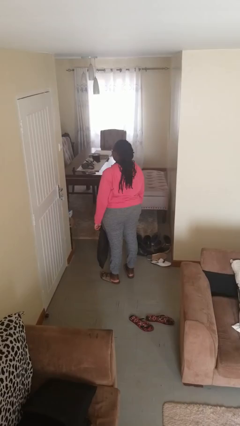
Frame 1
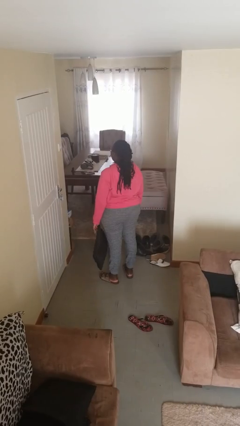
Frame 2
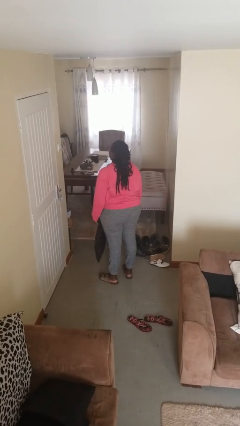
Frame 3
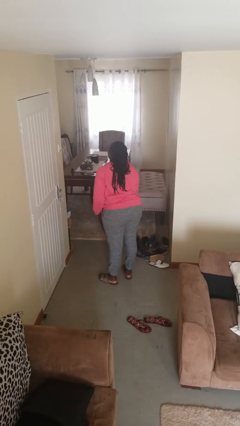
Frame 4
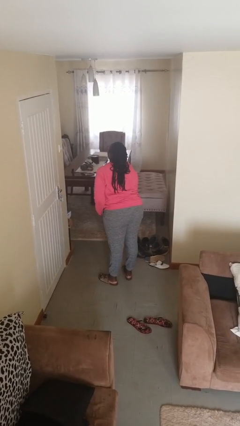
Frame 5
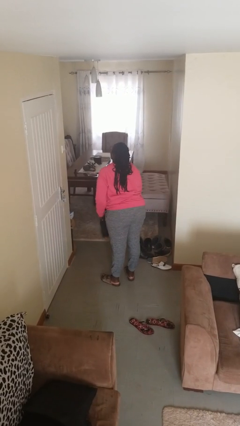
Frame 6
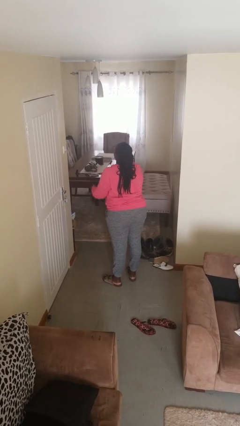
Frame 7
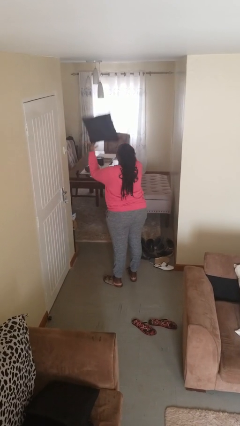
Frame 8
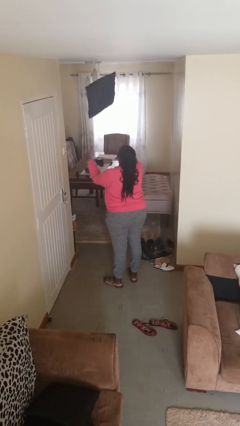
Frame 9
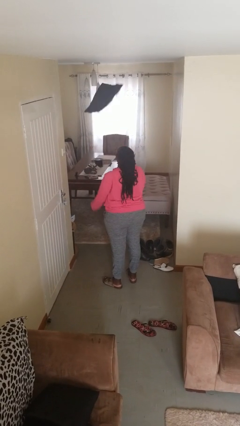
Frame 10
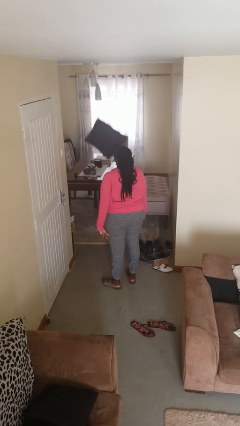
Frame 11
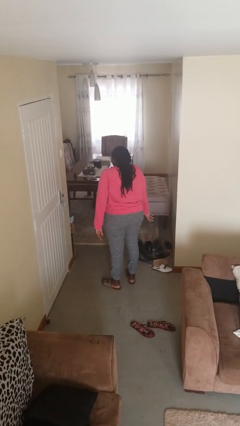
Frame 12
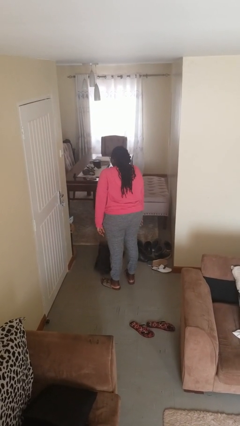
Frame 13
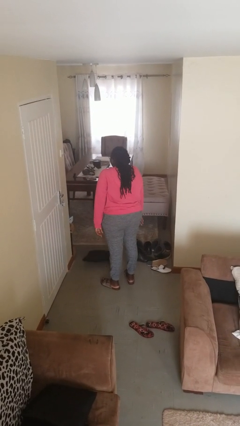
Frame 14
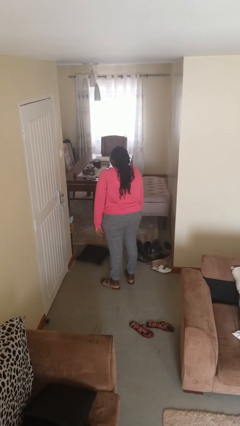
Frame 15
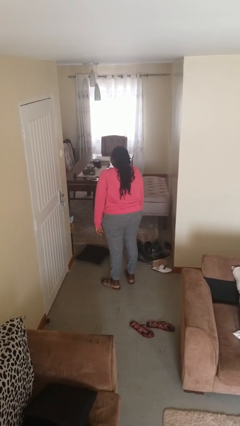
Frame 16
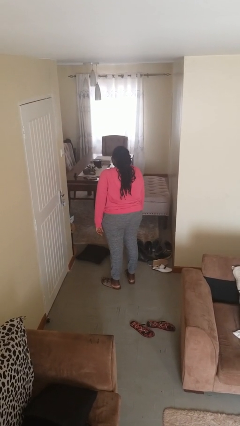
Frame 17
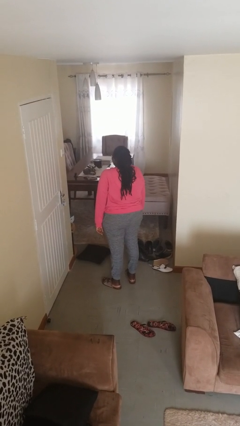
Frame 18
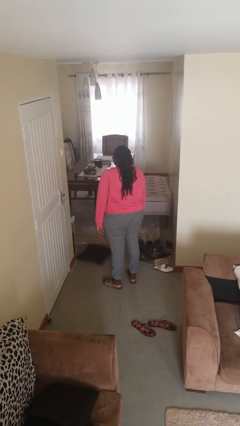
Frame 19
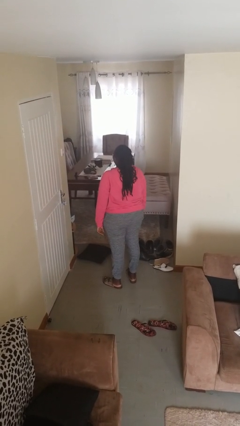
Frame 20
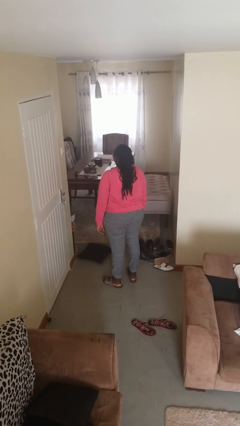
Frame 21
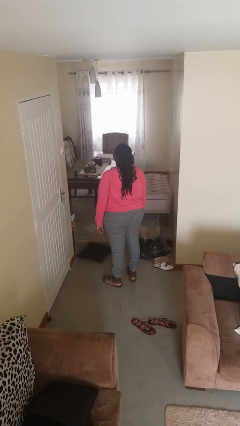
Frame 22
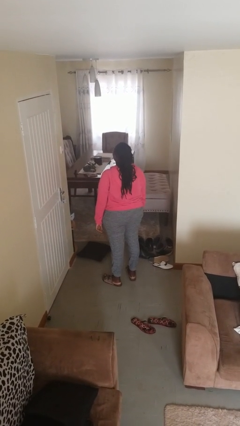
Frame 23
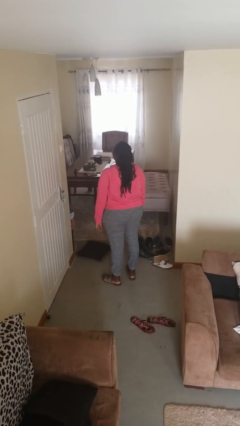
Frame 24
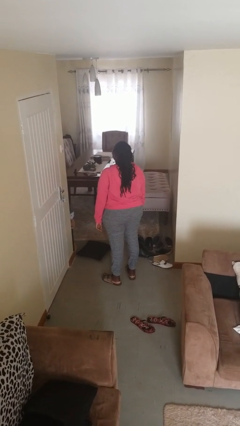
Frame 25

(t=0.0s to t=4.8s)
person throws object into air

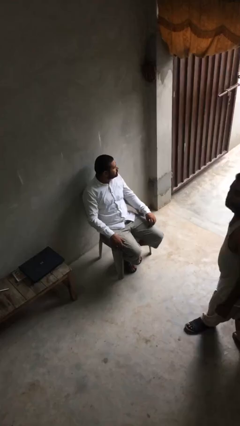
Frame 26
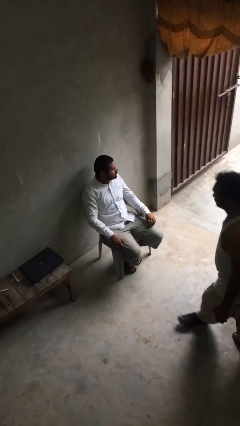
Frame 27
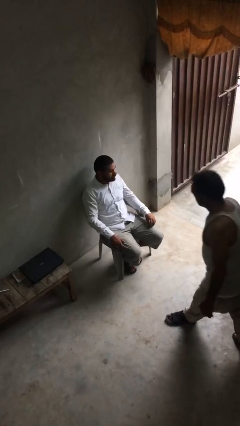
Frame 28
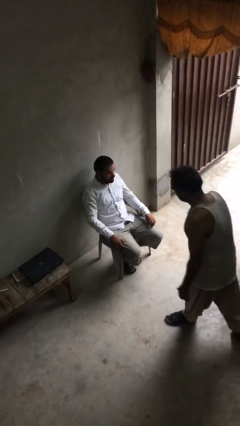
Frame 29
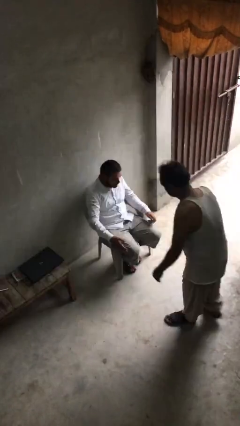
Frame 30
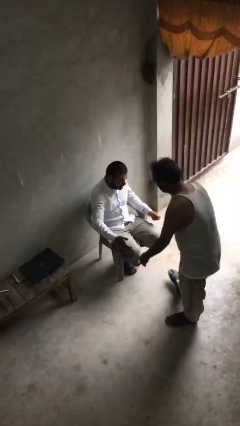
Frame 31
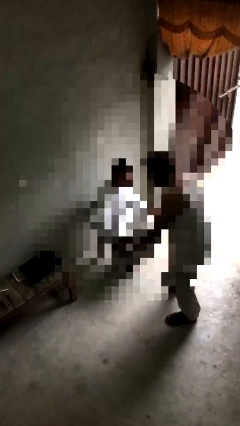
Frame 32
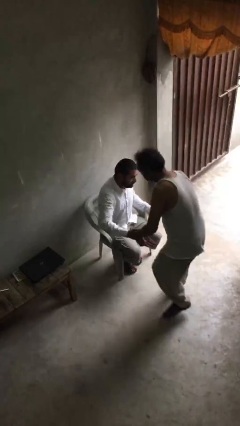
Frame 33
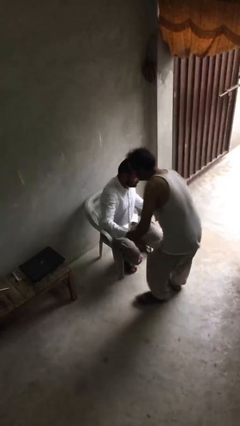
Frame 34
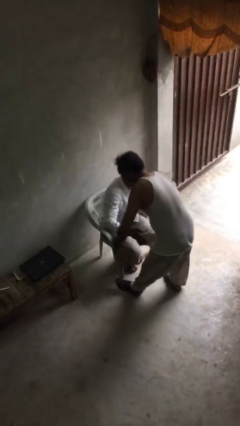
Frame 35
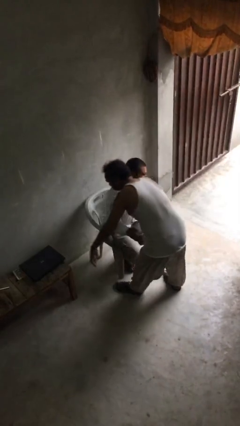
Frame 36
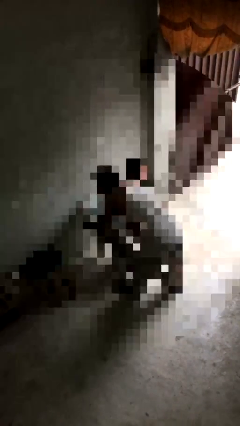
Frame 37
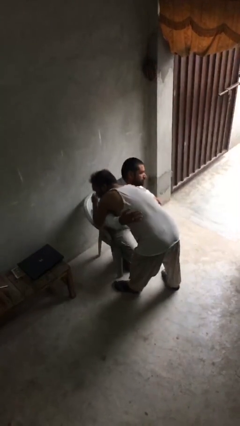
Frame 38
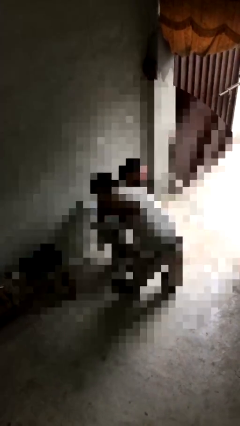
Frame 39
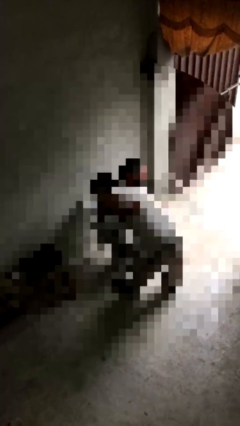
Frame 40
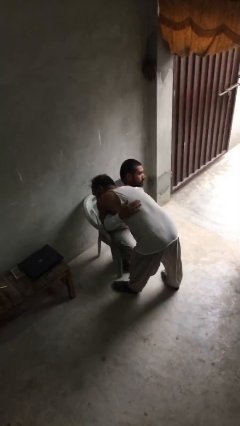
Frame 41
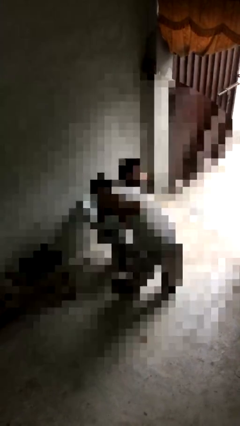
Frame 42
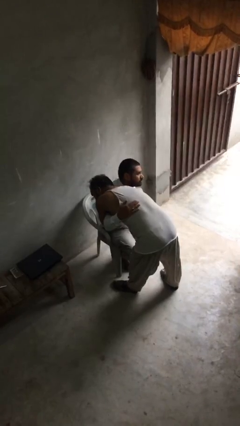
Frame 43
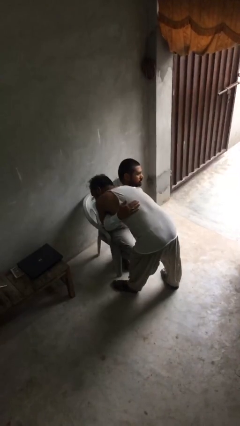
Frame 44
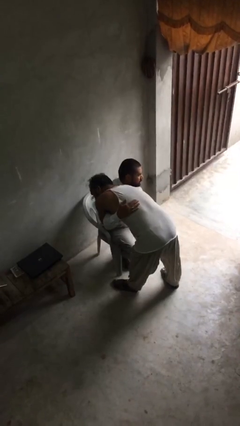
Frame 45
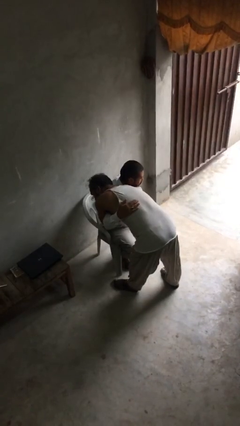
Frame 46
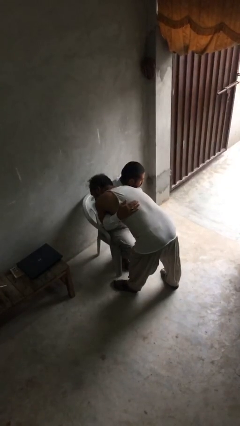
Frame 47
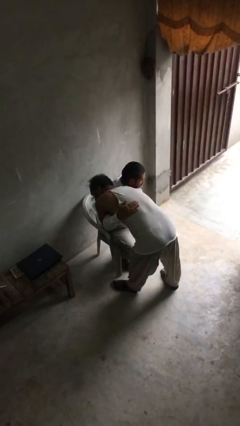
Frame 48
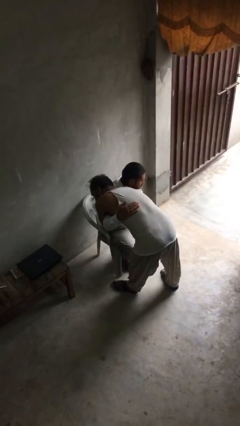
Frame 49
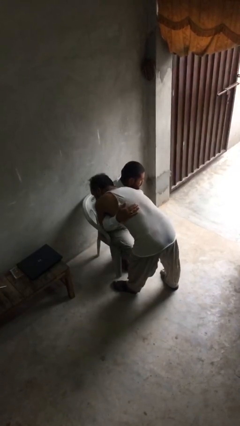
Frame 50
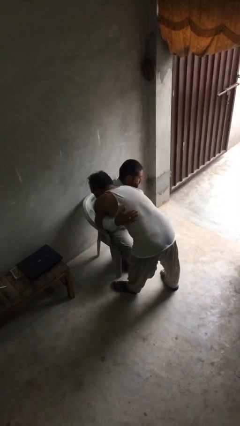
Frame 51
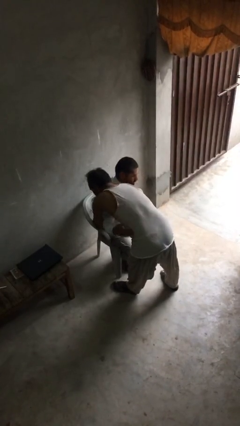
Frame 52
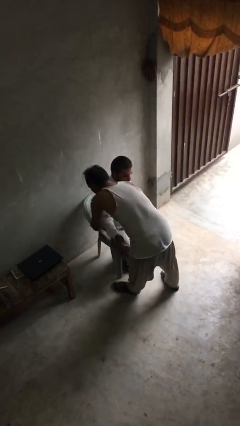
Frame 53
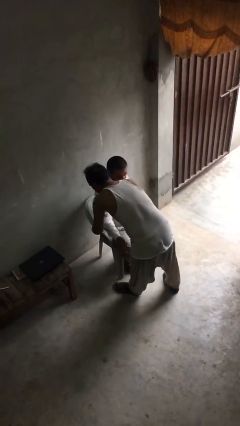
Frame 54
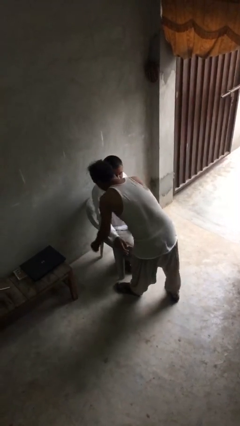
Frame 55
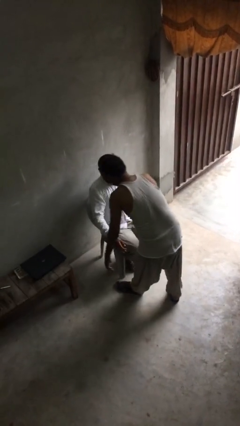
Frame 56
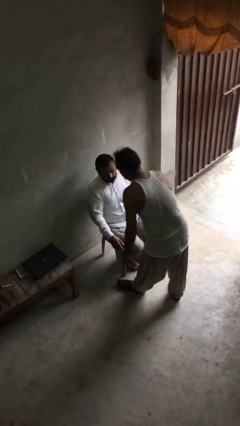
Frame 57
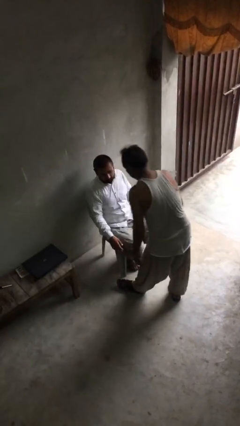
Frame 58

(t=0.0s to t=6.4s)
person embraces person

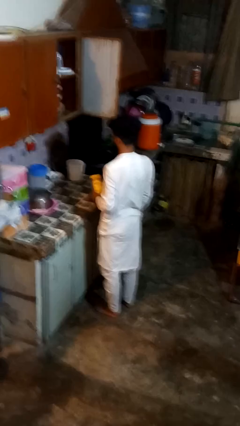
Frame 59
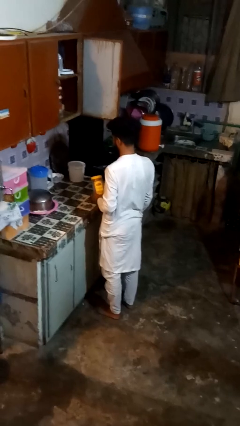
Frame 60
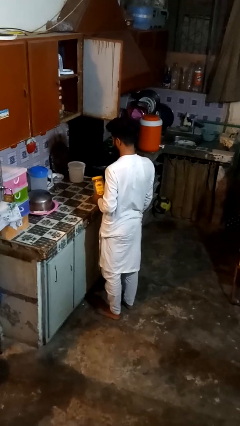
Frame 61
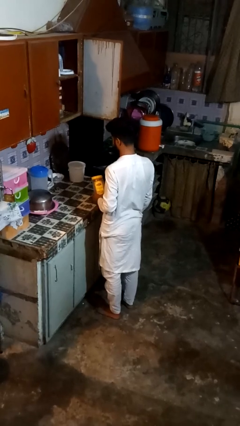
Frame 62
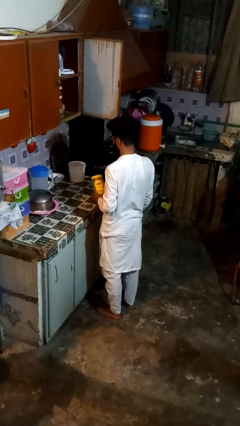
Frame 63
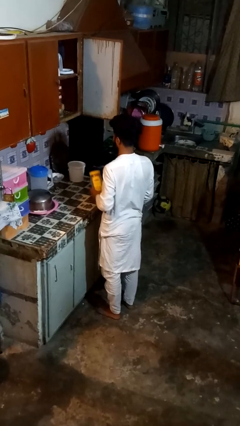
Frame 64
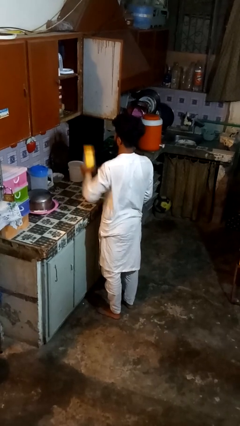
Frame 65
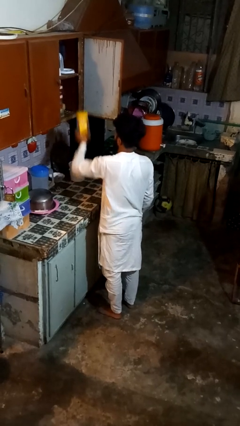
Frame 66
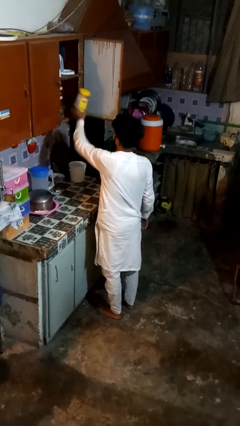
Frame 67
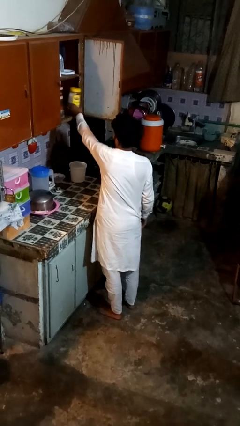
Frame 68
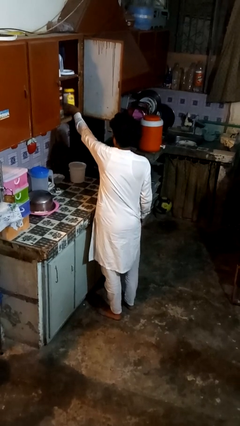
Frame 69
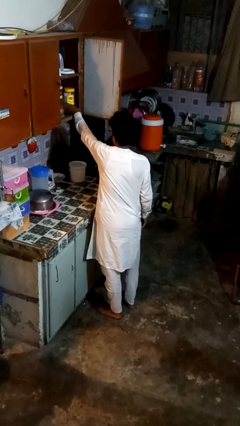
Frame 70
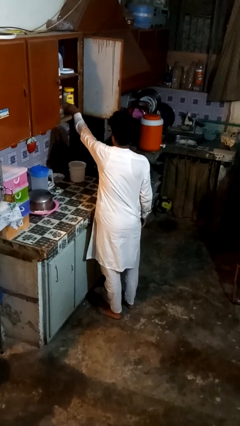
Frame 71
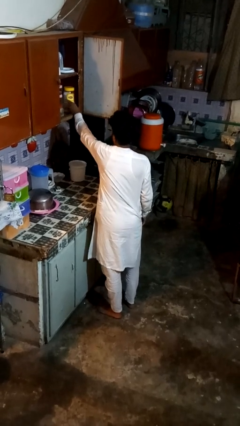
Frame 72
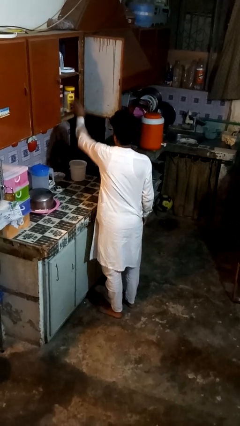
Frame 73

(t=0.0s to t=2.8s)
person takes object from cabinet

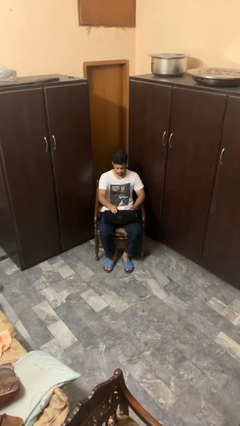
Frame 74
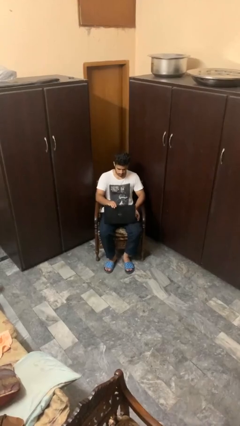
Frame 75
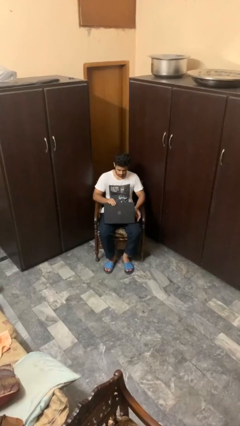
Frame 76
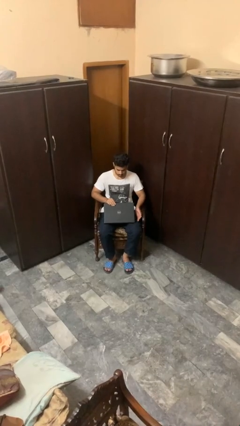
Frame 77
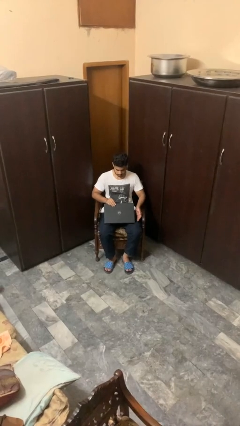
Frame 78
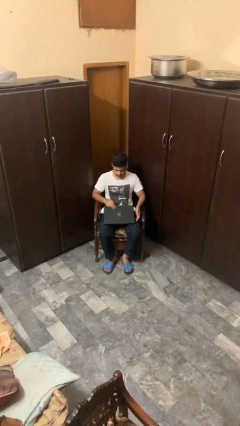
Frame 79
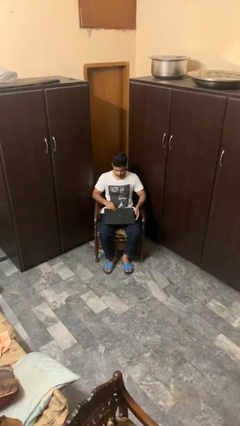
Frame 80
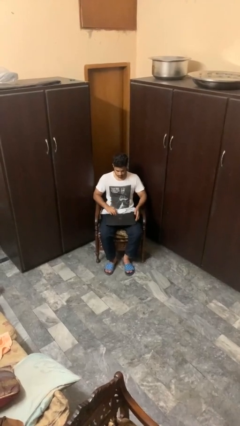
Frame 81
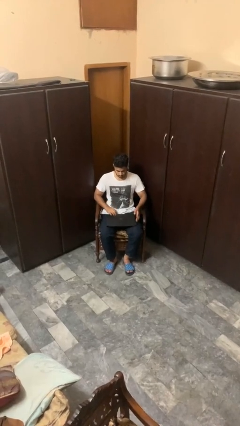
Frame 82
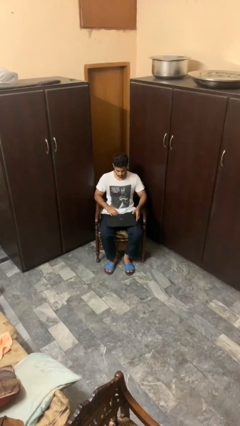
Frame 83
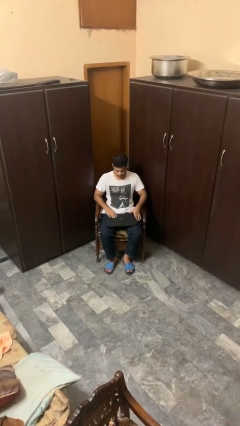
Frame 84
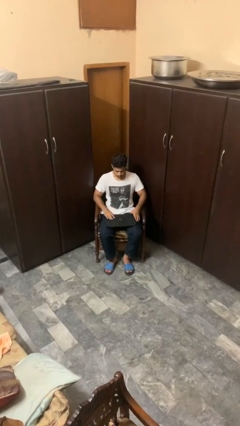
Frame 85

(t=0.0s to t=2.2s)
person closes laptop

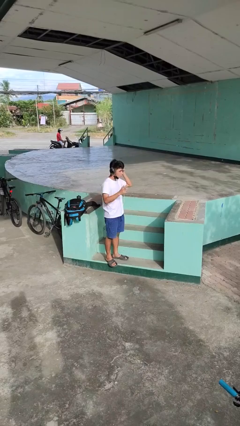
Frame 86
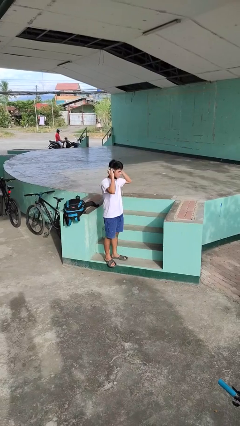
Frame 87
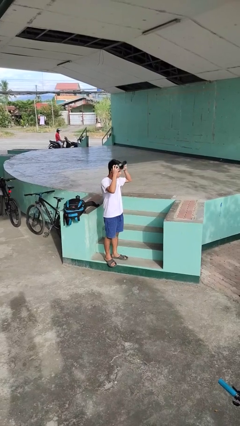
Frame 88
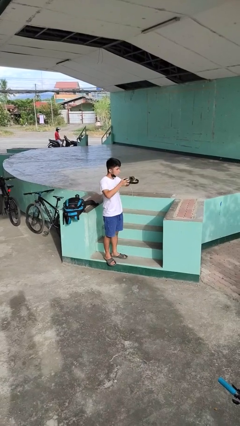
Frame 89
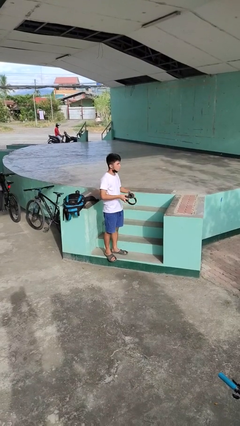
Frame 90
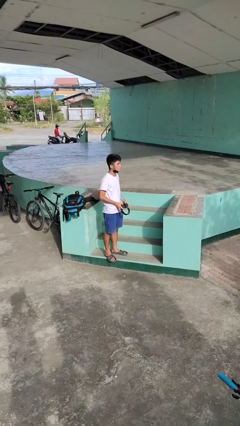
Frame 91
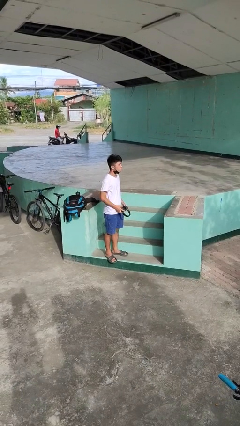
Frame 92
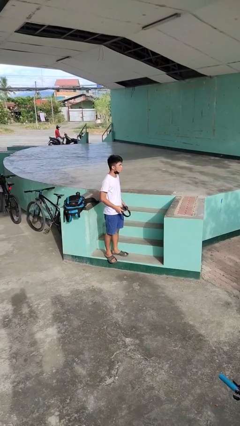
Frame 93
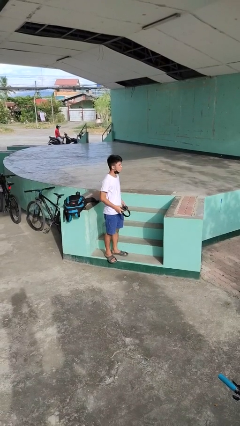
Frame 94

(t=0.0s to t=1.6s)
person takes off headphones
